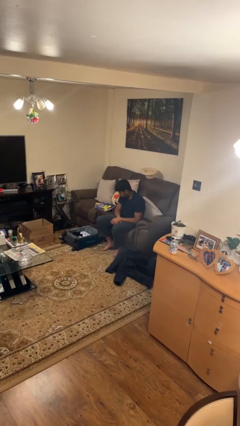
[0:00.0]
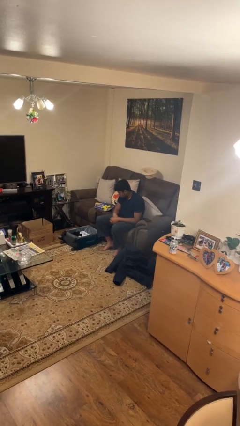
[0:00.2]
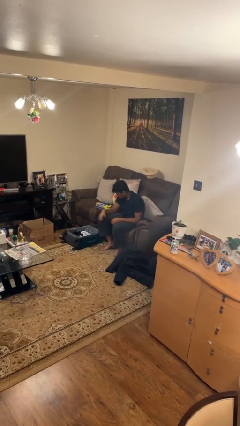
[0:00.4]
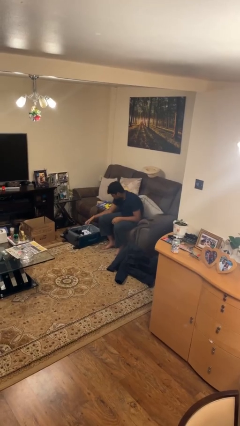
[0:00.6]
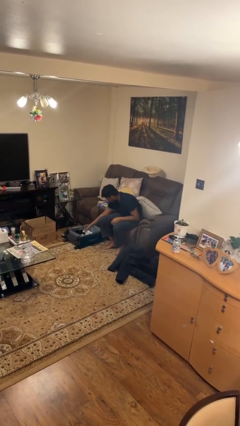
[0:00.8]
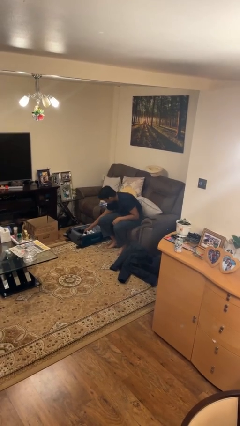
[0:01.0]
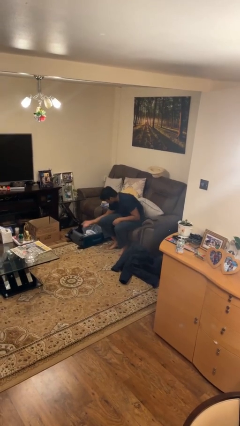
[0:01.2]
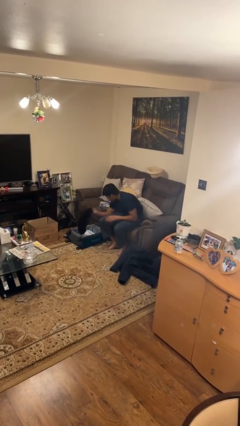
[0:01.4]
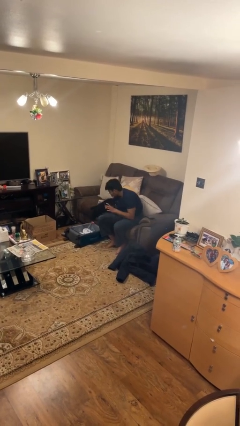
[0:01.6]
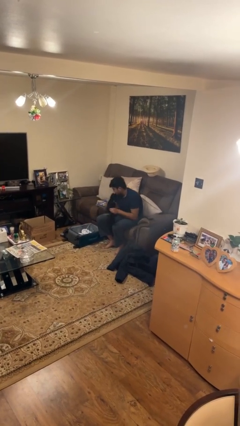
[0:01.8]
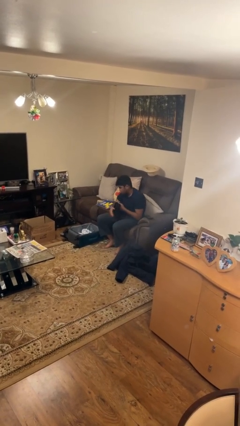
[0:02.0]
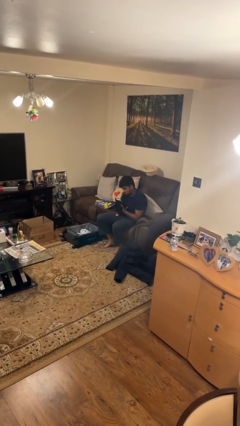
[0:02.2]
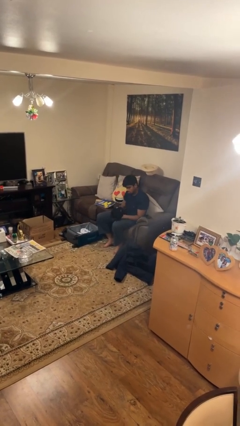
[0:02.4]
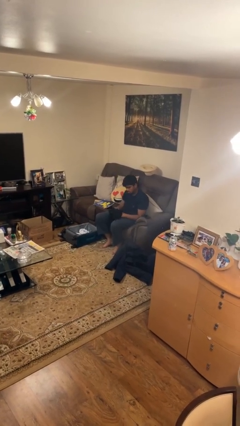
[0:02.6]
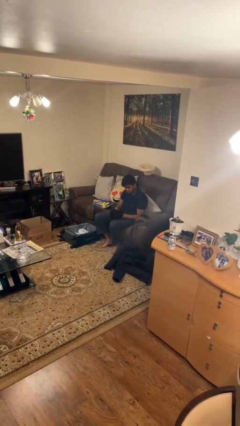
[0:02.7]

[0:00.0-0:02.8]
person unloads clothes from suitcase

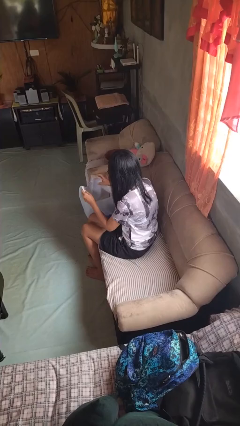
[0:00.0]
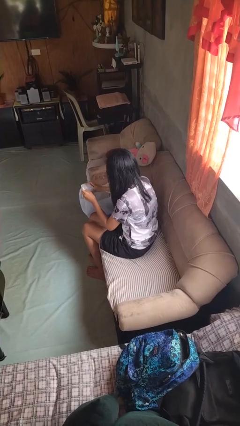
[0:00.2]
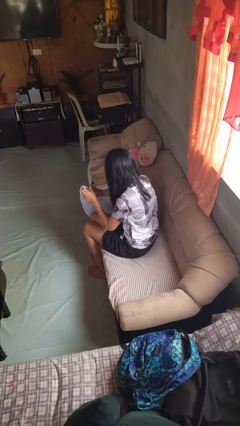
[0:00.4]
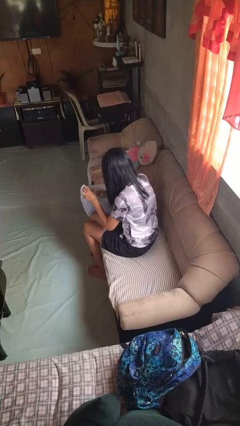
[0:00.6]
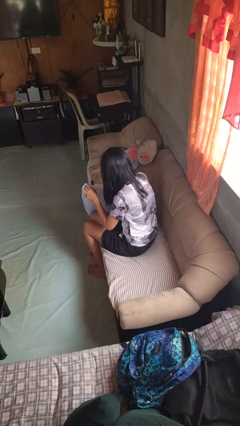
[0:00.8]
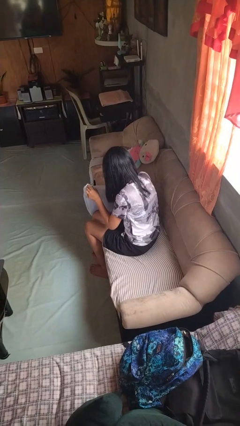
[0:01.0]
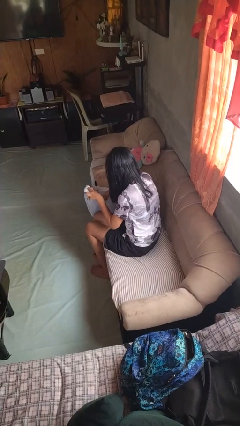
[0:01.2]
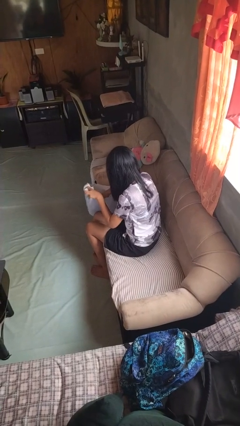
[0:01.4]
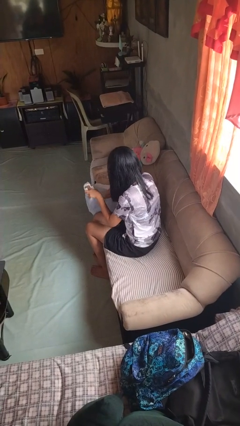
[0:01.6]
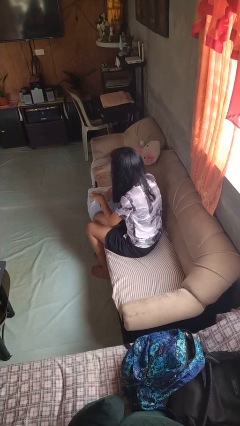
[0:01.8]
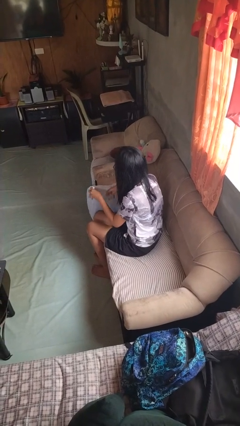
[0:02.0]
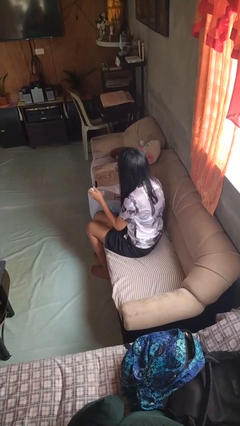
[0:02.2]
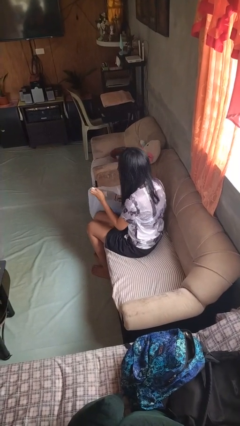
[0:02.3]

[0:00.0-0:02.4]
person searches in bag

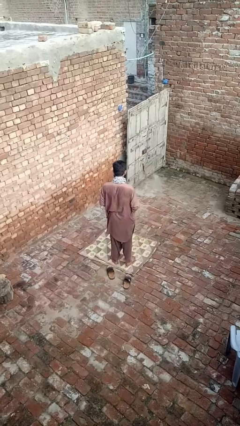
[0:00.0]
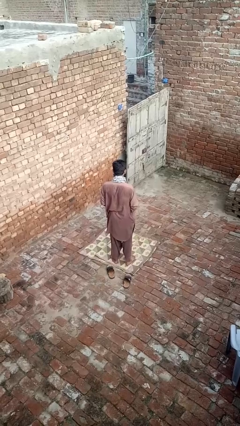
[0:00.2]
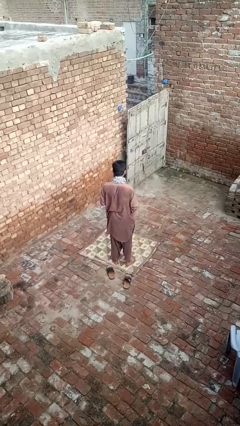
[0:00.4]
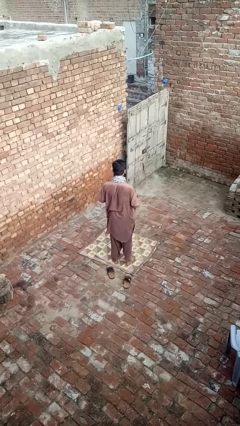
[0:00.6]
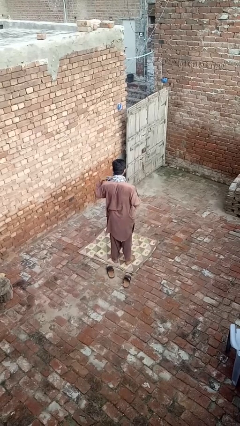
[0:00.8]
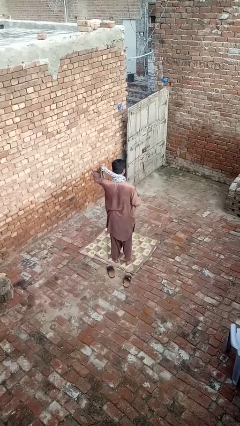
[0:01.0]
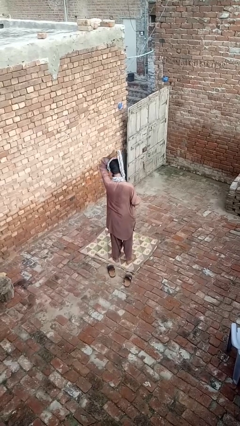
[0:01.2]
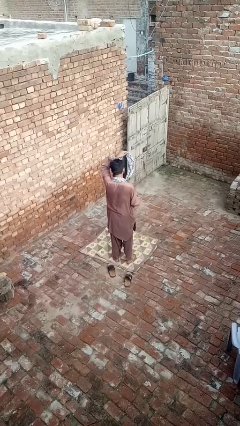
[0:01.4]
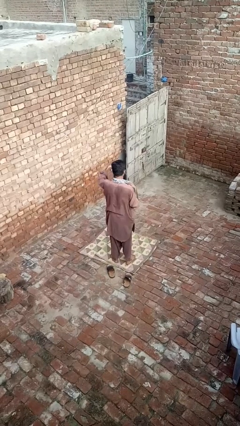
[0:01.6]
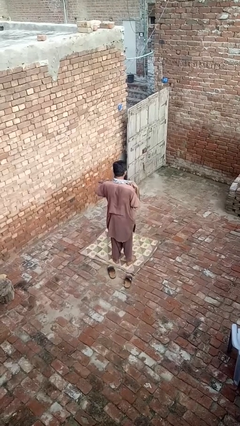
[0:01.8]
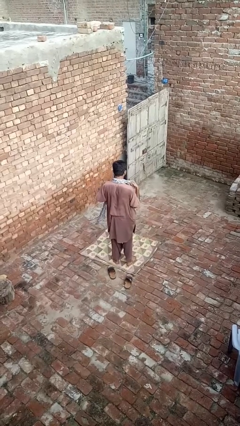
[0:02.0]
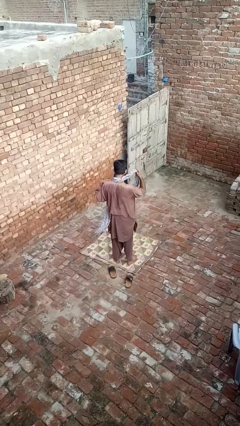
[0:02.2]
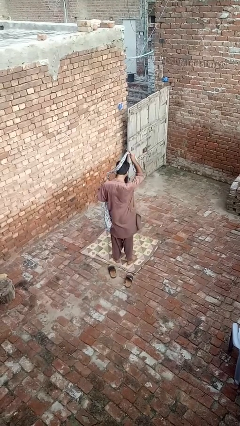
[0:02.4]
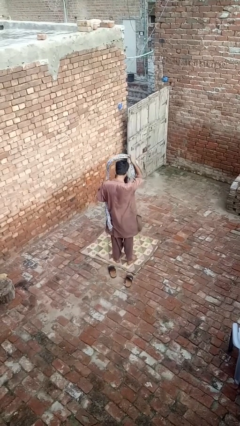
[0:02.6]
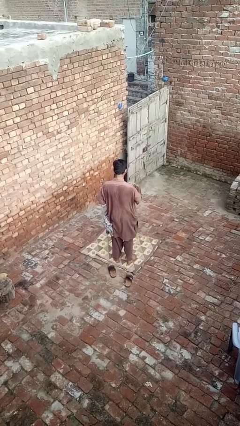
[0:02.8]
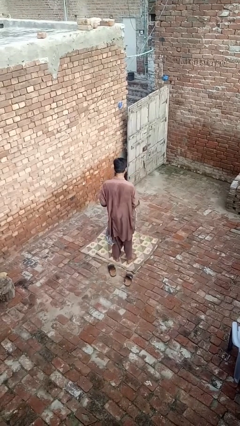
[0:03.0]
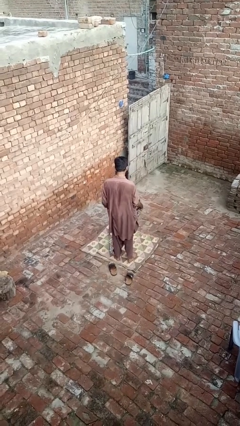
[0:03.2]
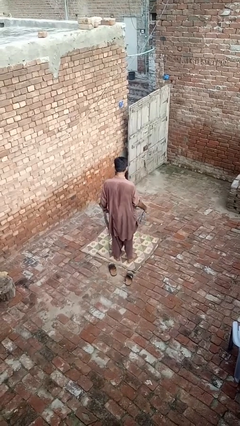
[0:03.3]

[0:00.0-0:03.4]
person takes off scarf

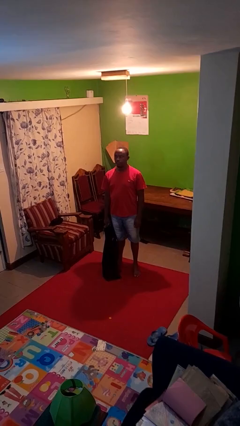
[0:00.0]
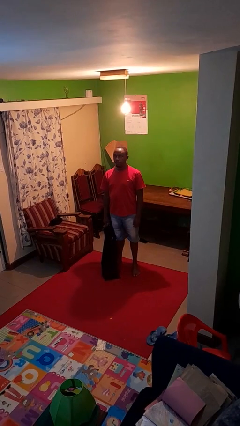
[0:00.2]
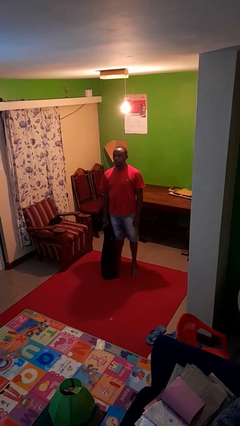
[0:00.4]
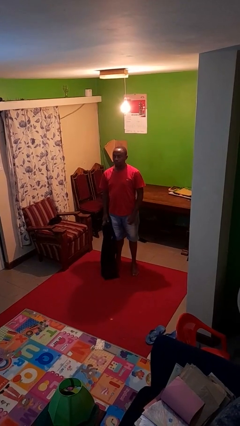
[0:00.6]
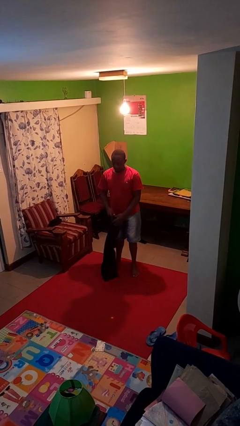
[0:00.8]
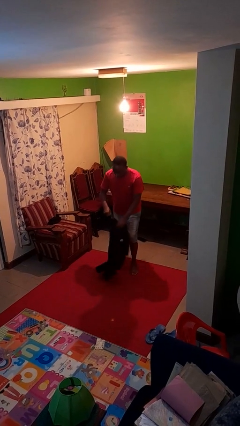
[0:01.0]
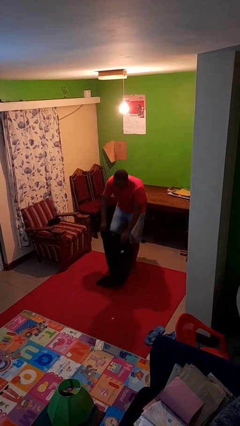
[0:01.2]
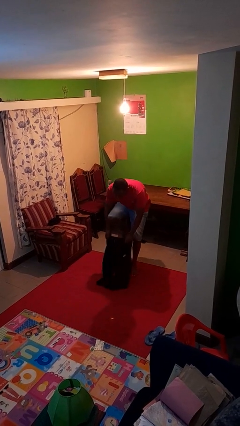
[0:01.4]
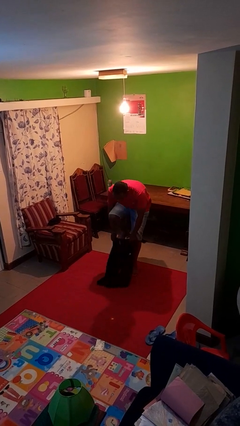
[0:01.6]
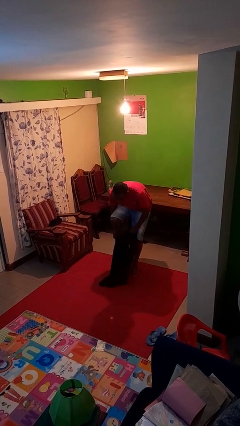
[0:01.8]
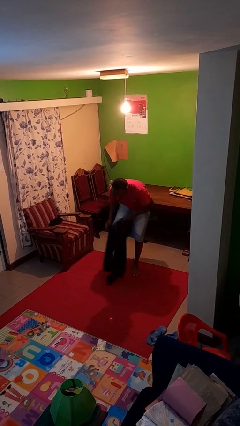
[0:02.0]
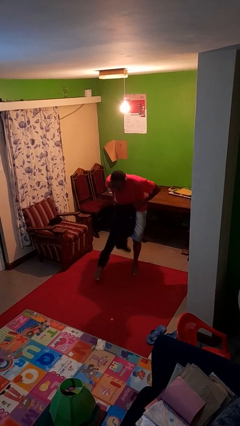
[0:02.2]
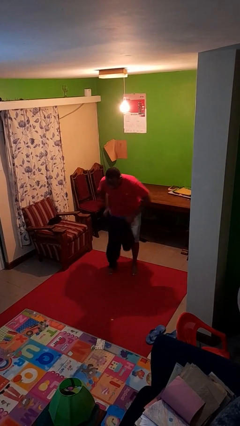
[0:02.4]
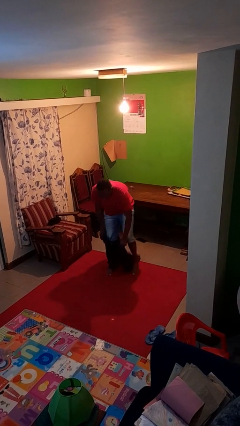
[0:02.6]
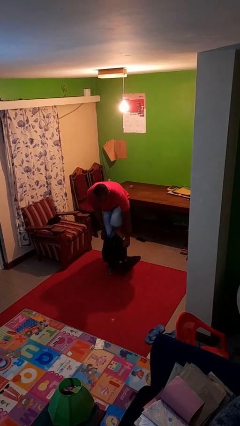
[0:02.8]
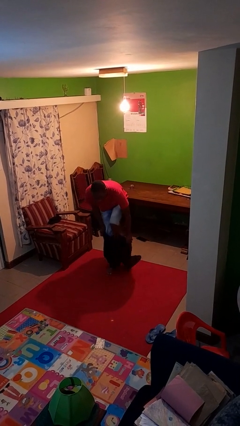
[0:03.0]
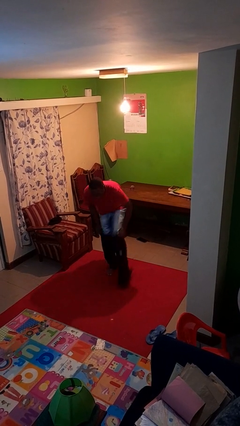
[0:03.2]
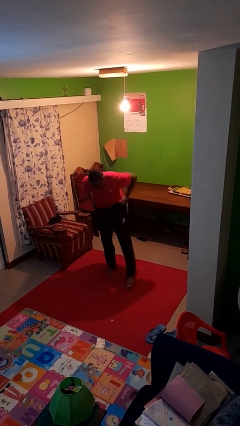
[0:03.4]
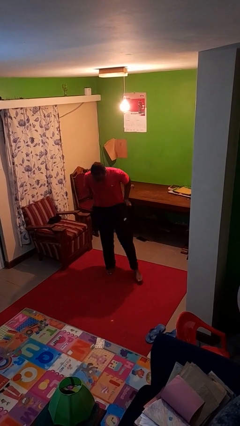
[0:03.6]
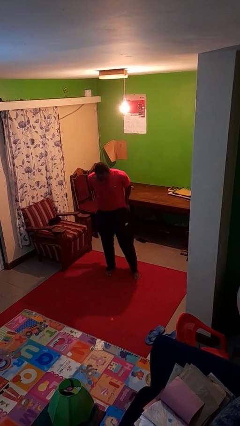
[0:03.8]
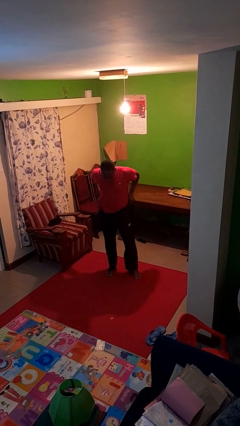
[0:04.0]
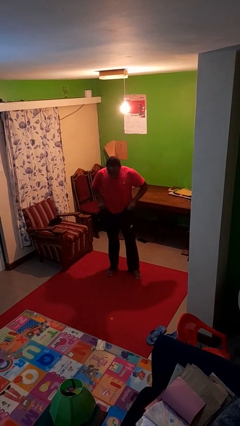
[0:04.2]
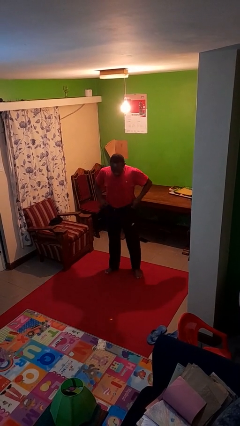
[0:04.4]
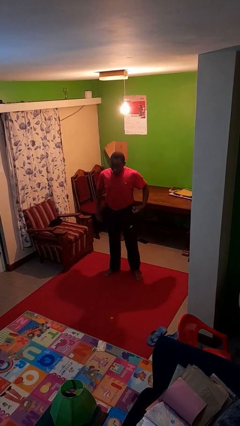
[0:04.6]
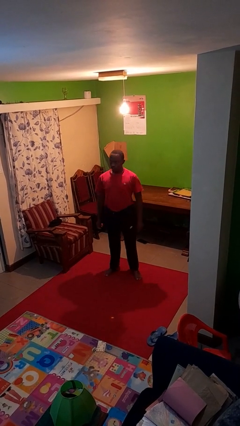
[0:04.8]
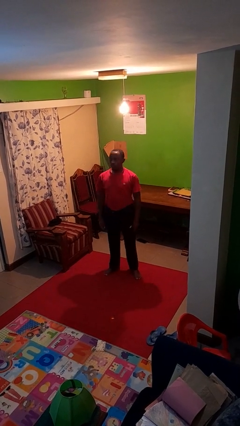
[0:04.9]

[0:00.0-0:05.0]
person puts on pants

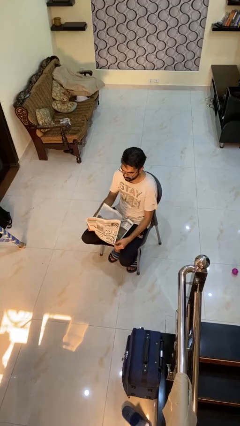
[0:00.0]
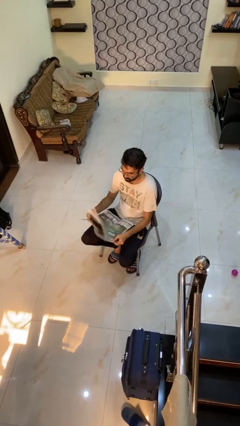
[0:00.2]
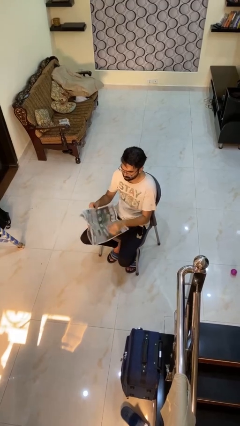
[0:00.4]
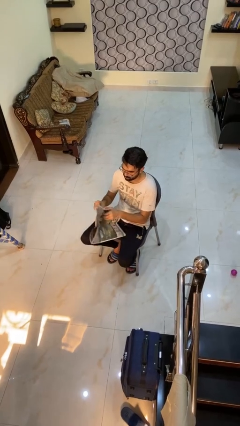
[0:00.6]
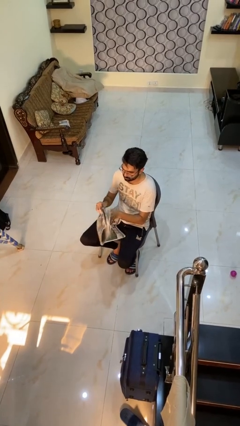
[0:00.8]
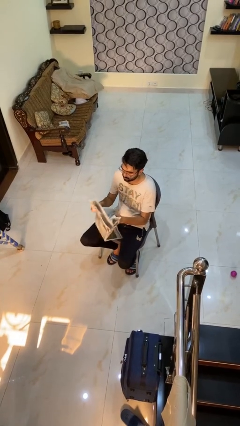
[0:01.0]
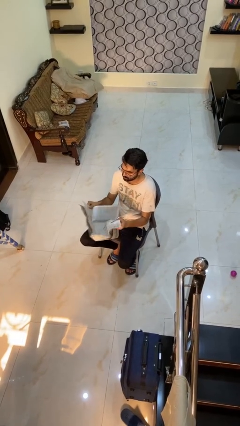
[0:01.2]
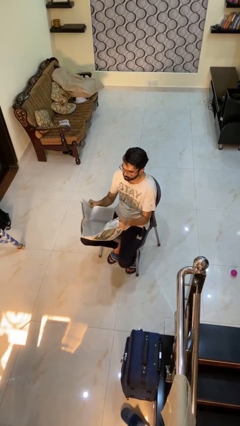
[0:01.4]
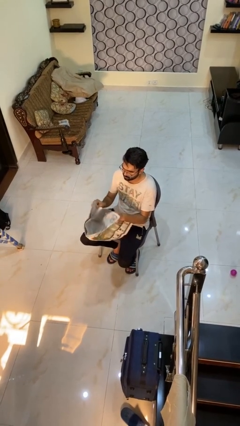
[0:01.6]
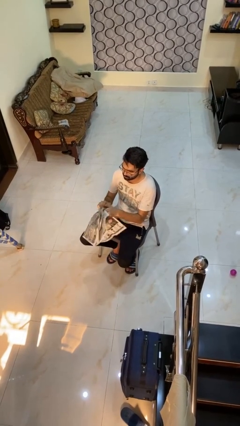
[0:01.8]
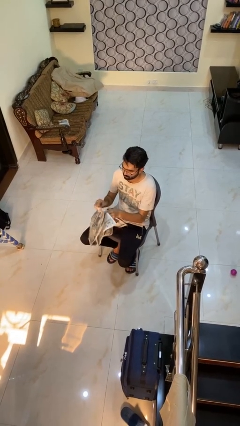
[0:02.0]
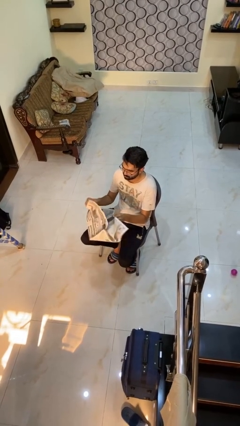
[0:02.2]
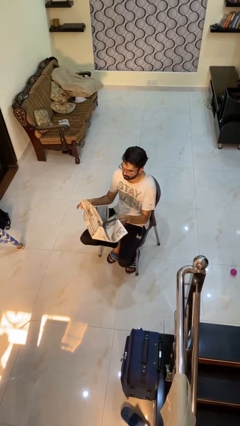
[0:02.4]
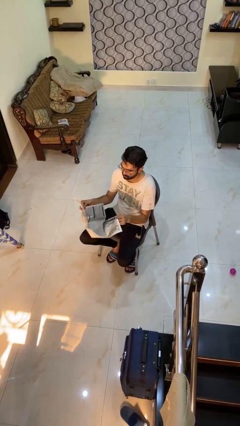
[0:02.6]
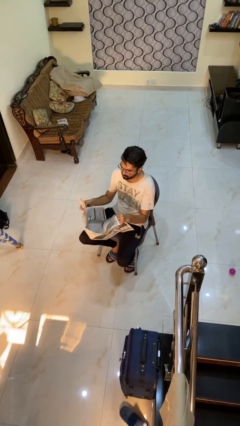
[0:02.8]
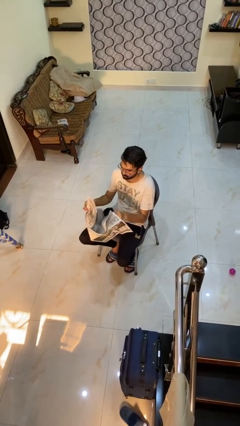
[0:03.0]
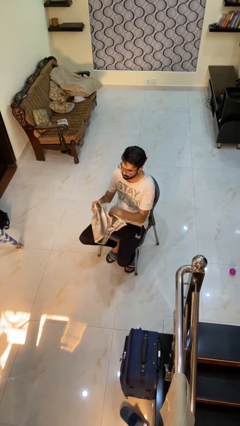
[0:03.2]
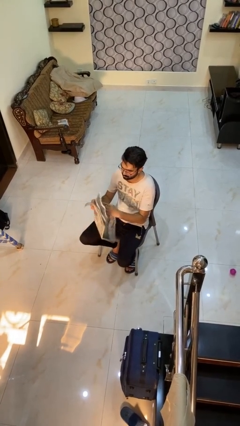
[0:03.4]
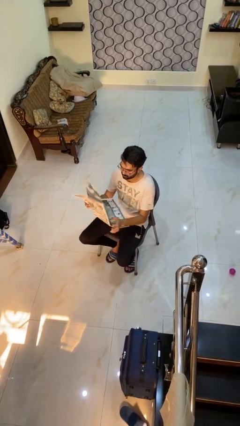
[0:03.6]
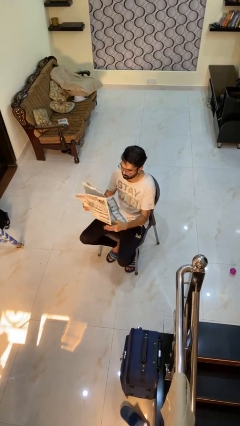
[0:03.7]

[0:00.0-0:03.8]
person reads newspaper

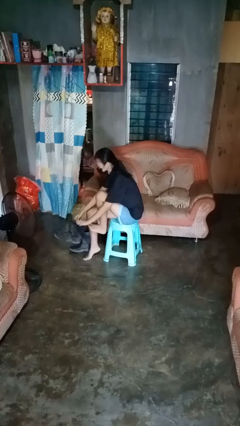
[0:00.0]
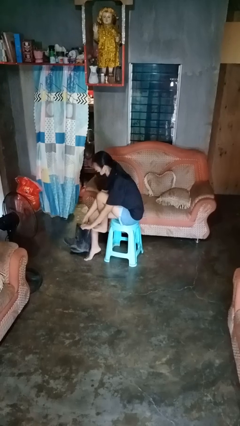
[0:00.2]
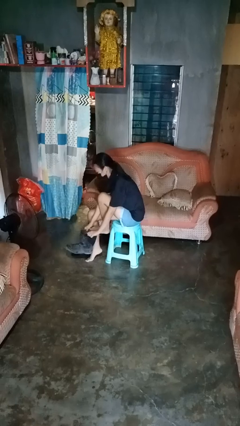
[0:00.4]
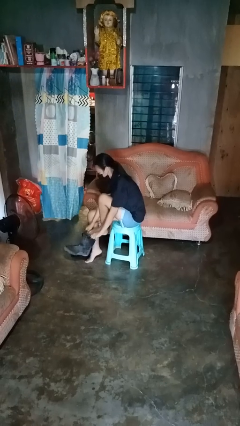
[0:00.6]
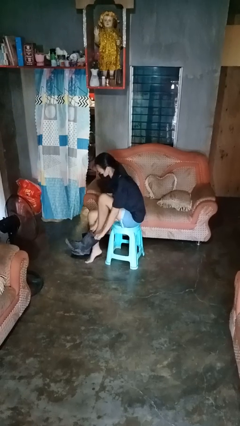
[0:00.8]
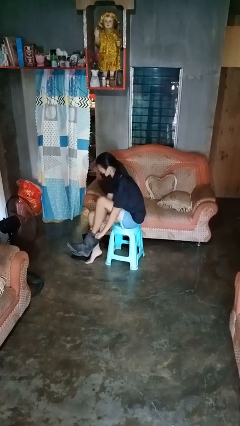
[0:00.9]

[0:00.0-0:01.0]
person puts on boots
